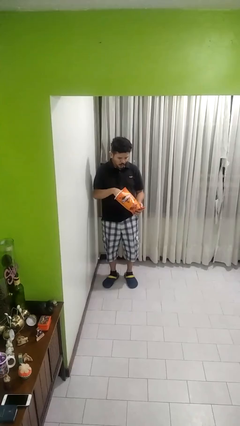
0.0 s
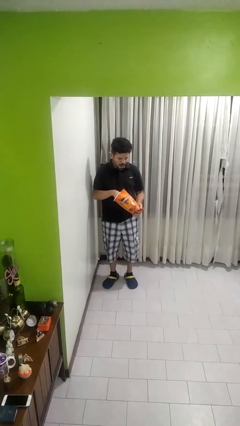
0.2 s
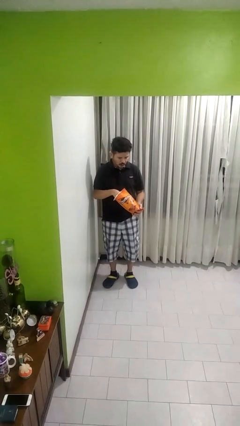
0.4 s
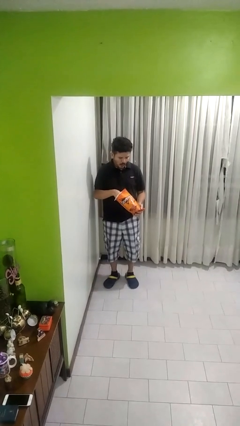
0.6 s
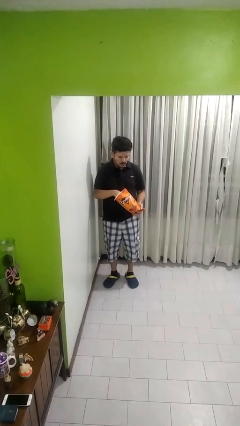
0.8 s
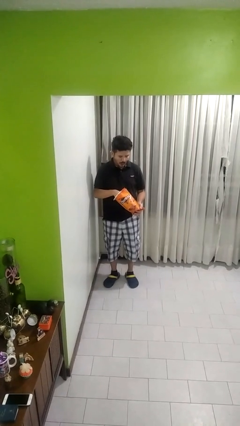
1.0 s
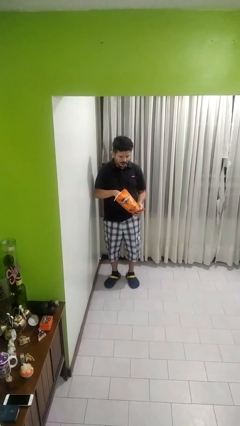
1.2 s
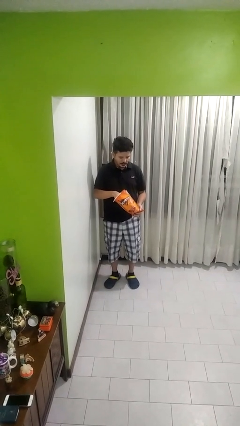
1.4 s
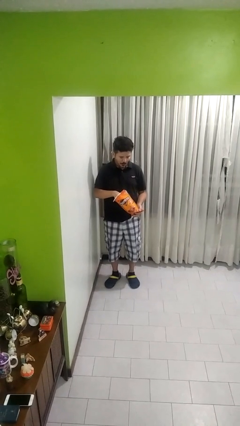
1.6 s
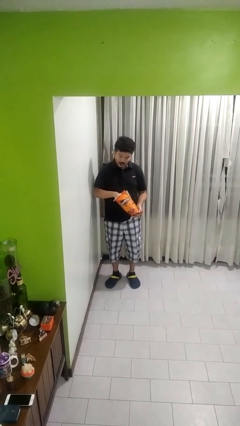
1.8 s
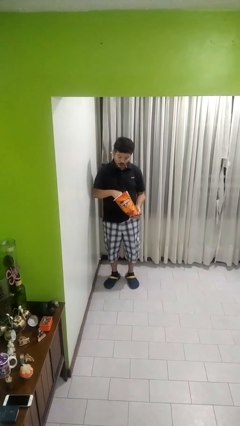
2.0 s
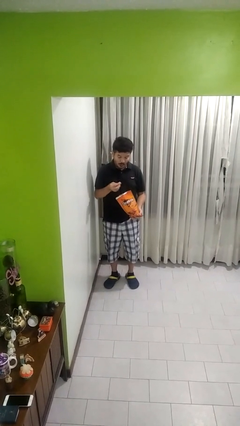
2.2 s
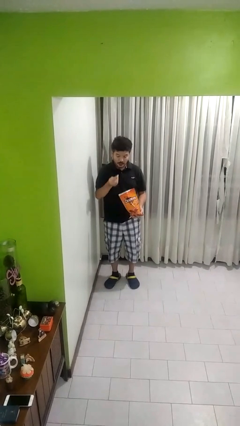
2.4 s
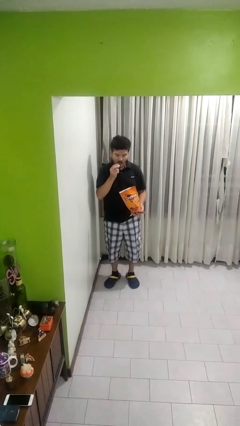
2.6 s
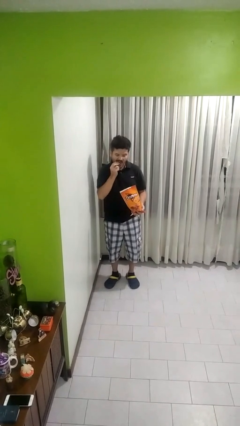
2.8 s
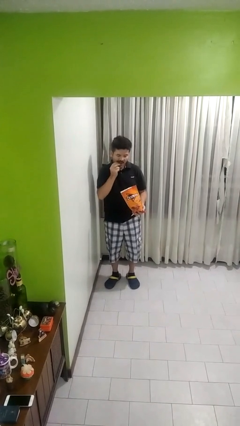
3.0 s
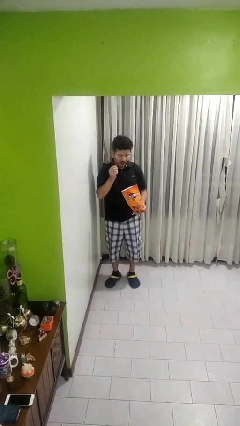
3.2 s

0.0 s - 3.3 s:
person eats snack from bag

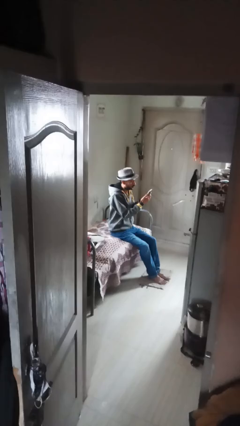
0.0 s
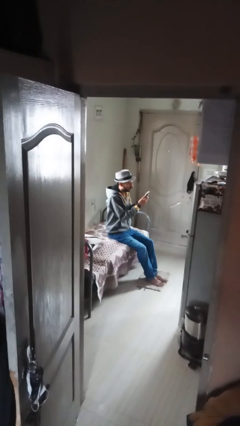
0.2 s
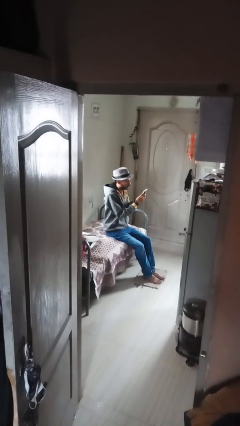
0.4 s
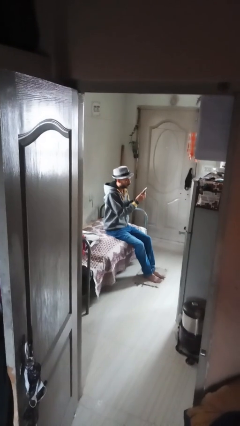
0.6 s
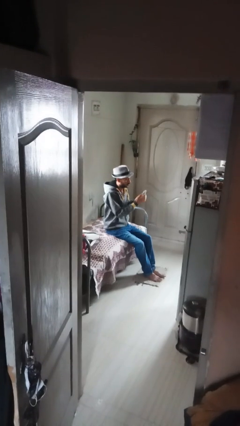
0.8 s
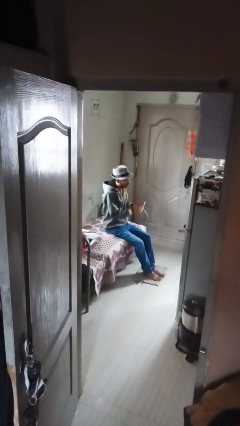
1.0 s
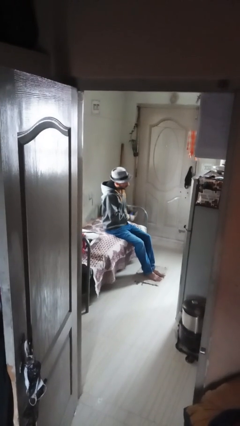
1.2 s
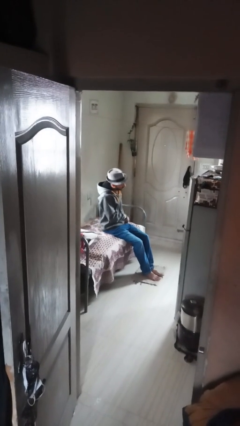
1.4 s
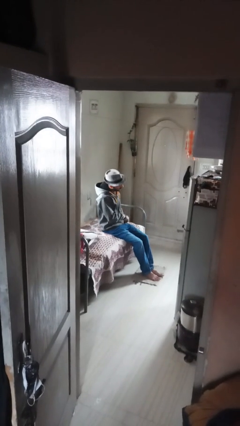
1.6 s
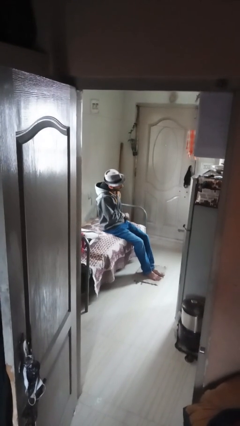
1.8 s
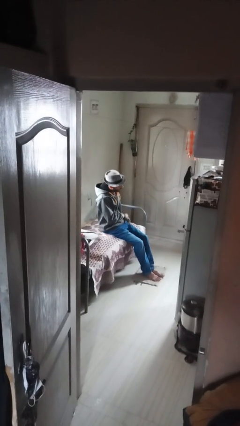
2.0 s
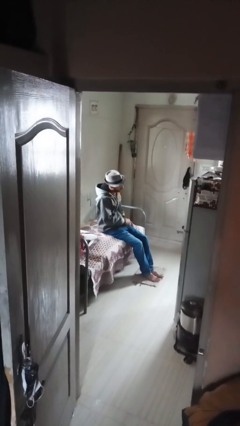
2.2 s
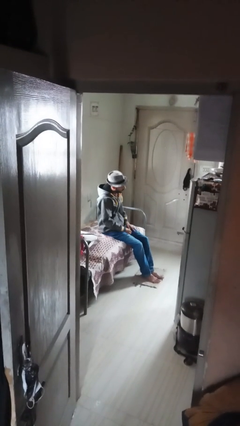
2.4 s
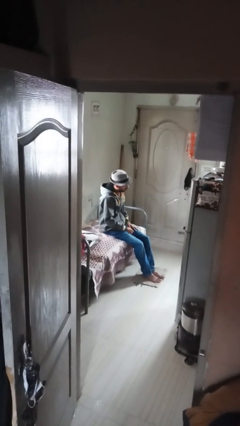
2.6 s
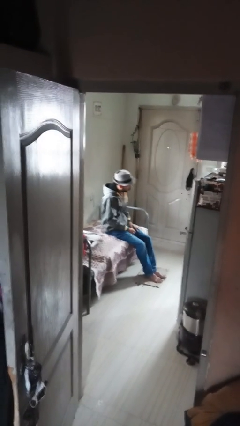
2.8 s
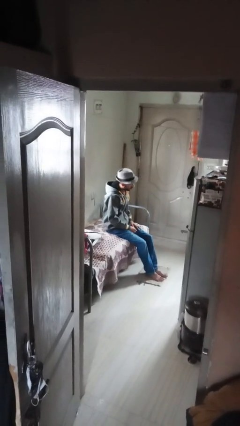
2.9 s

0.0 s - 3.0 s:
person puts phone into pocket

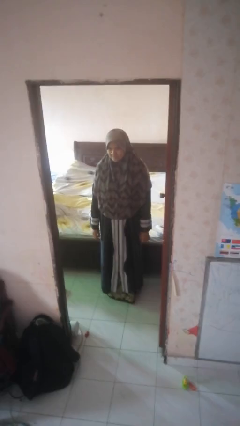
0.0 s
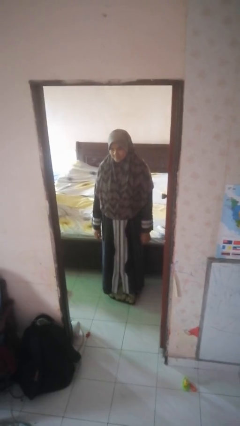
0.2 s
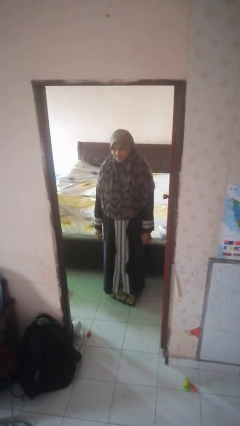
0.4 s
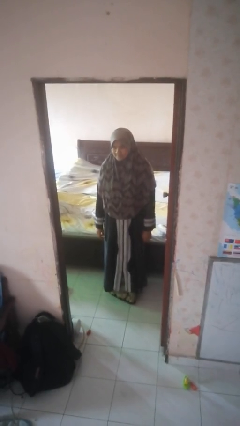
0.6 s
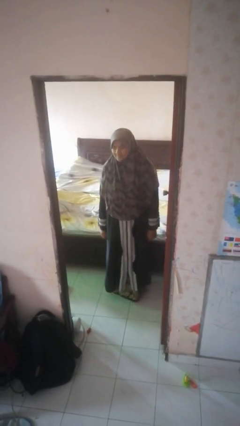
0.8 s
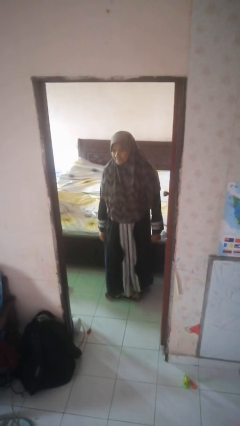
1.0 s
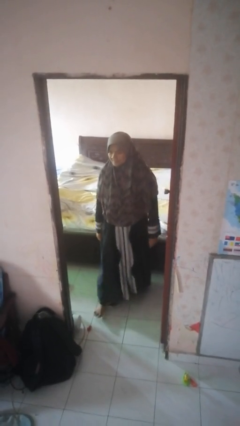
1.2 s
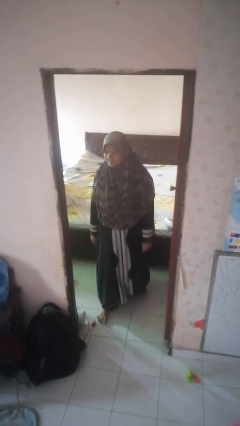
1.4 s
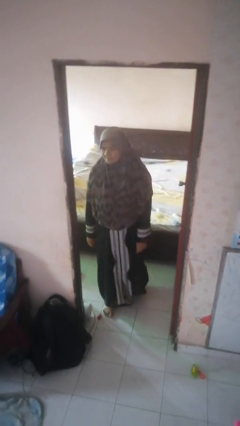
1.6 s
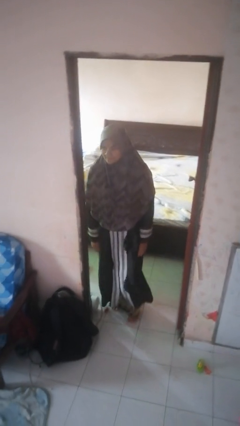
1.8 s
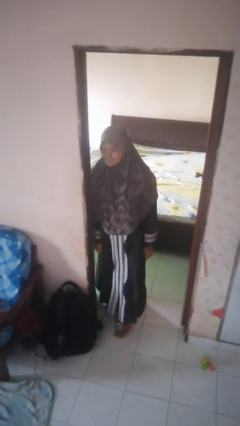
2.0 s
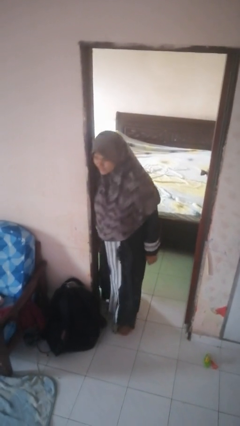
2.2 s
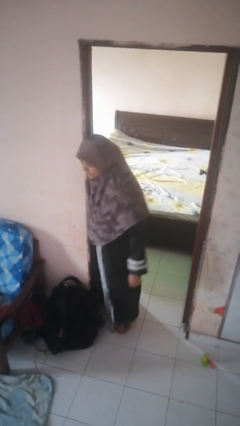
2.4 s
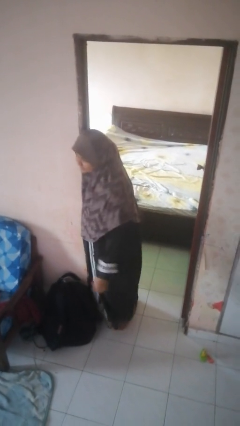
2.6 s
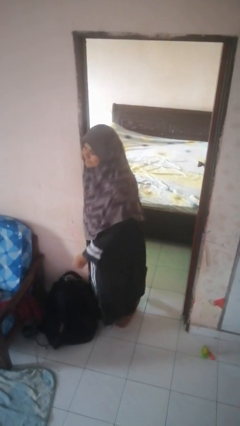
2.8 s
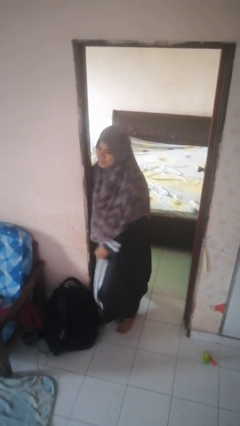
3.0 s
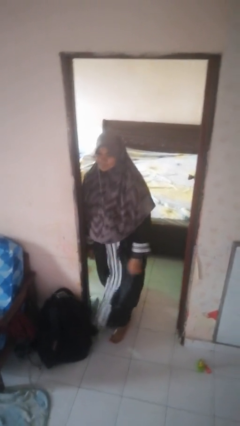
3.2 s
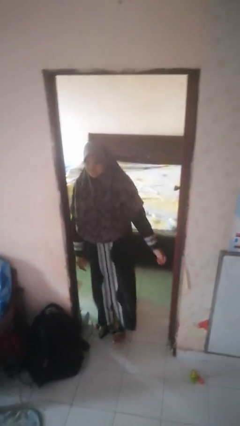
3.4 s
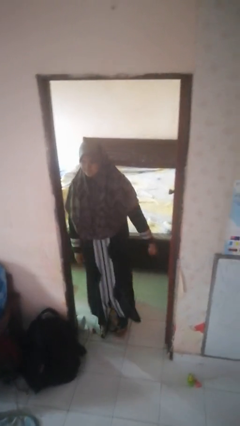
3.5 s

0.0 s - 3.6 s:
person bumps into wall

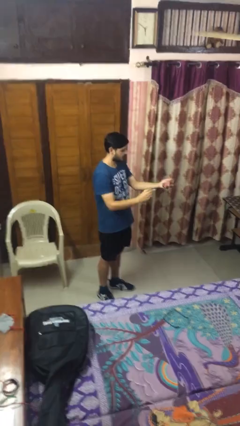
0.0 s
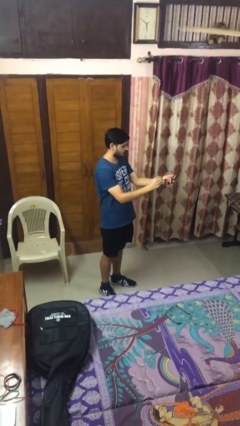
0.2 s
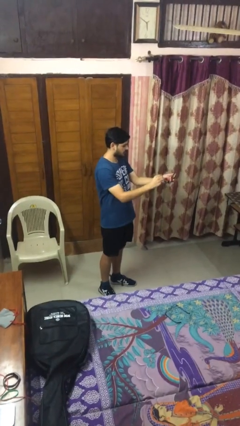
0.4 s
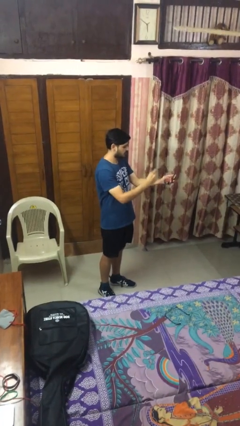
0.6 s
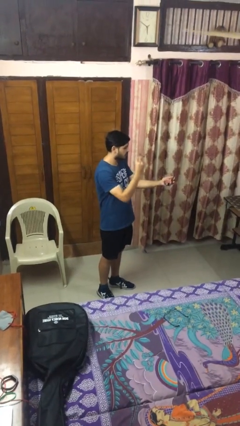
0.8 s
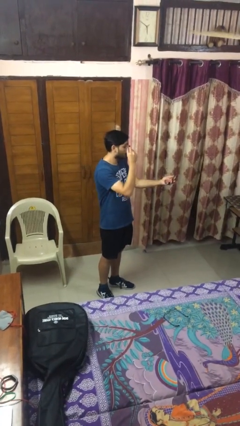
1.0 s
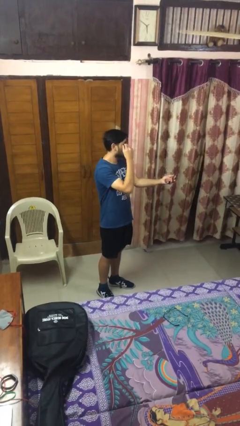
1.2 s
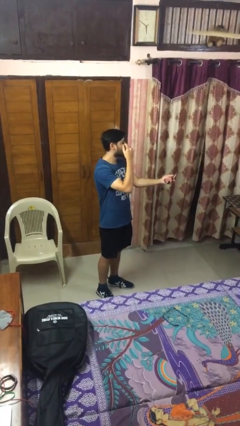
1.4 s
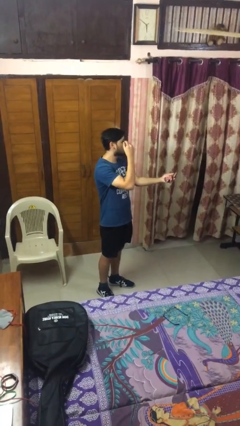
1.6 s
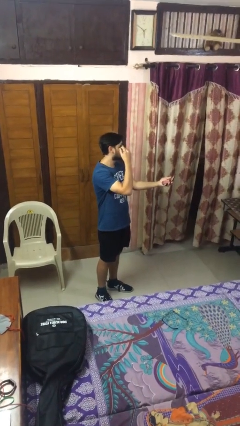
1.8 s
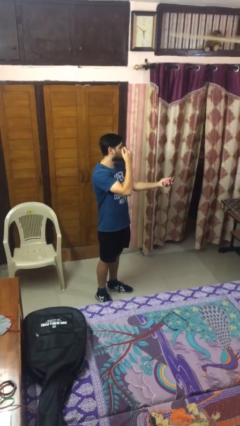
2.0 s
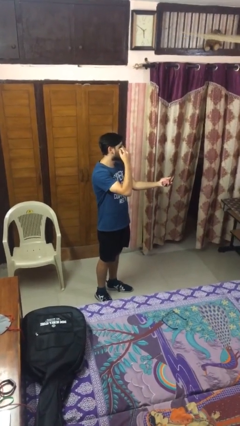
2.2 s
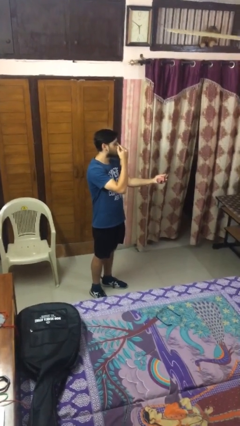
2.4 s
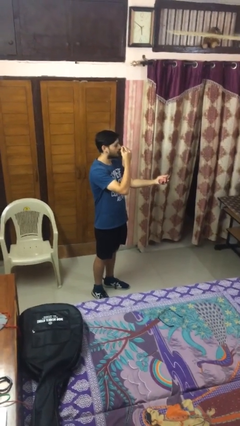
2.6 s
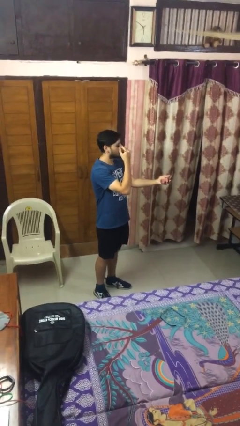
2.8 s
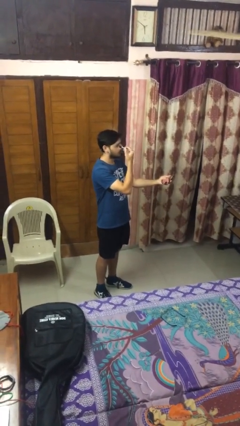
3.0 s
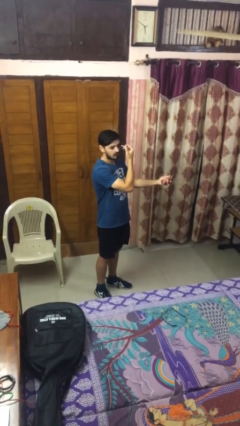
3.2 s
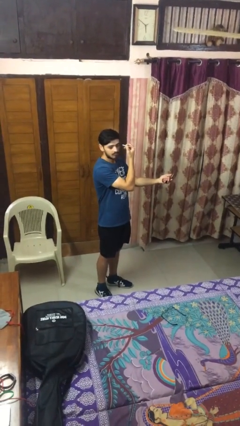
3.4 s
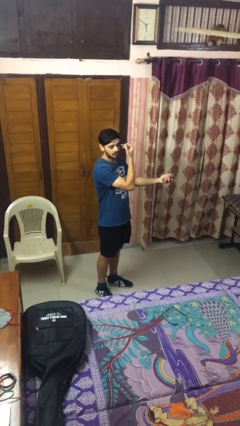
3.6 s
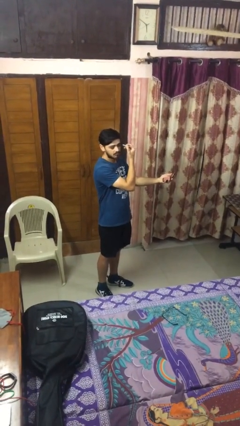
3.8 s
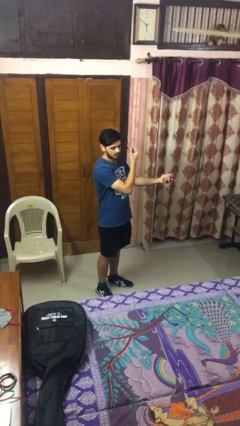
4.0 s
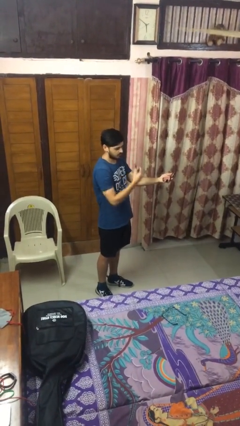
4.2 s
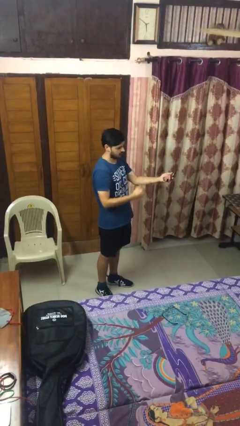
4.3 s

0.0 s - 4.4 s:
person applies eye makeup

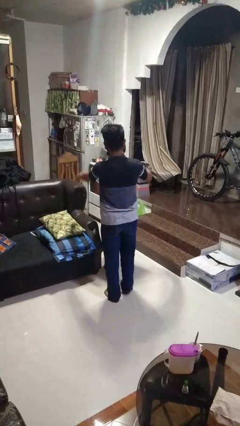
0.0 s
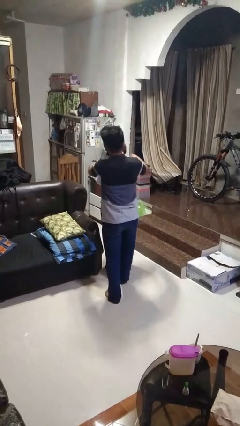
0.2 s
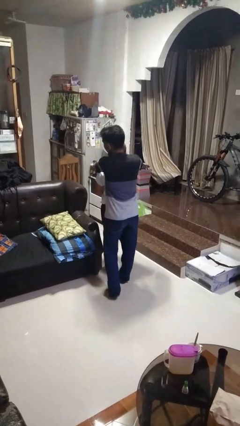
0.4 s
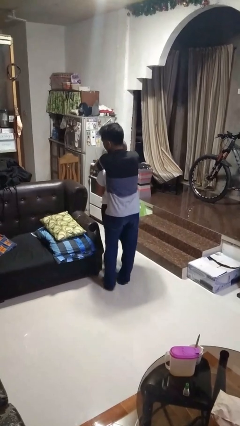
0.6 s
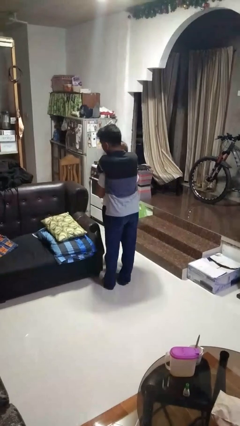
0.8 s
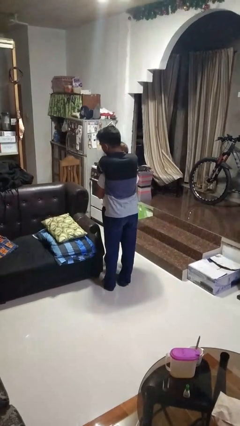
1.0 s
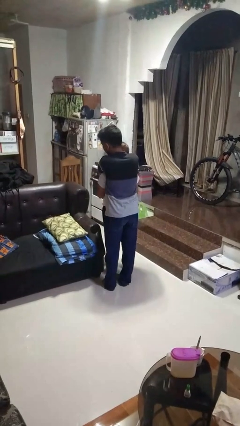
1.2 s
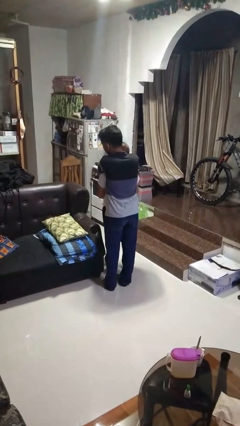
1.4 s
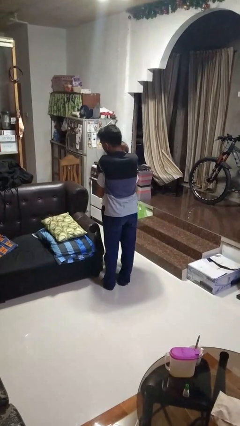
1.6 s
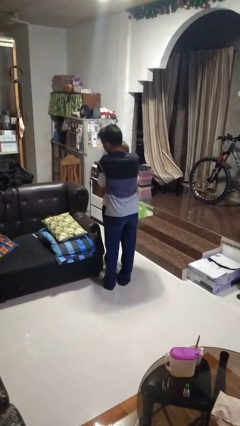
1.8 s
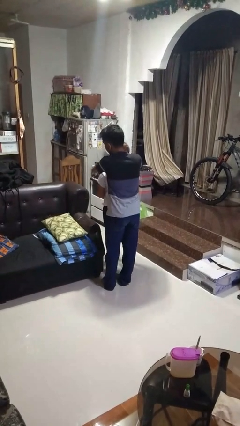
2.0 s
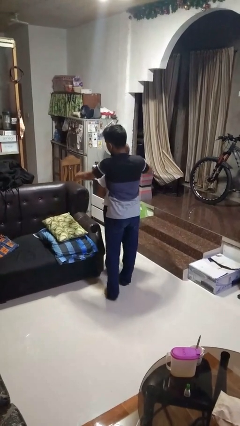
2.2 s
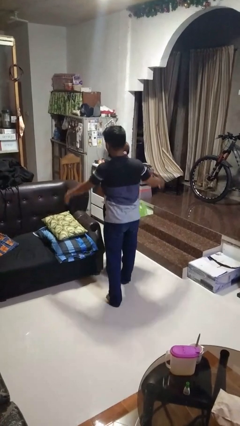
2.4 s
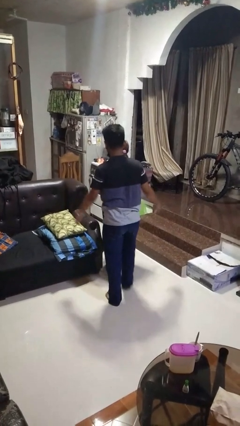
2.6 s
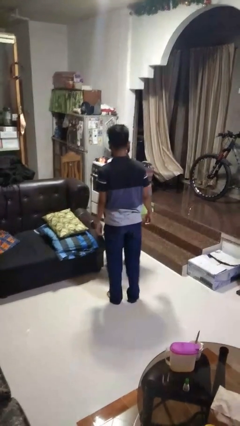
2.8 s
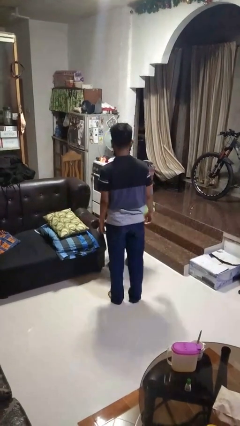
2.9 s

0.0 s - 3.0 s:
person hugs person from behind

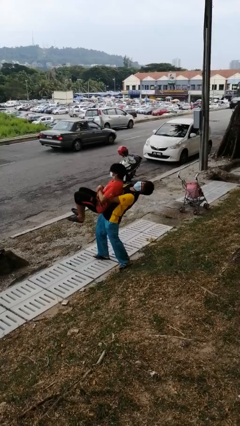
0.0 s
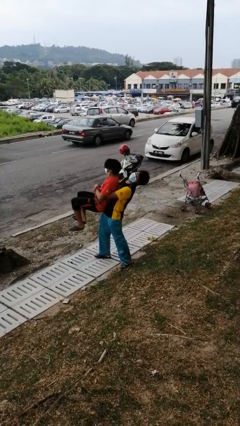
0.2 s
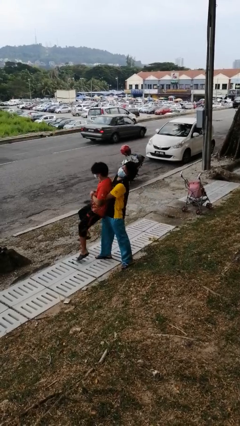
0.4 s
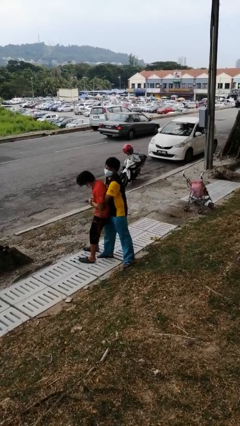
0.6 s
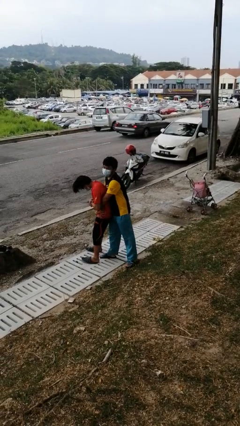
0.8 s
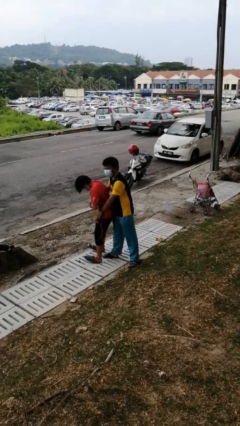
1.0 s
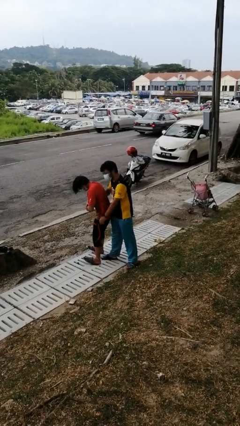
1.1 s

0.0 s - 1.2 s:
person puts down person
